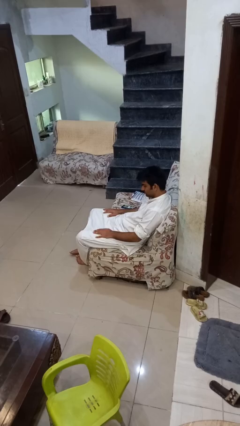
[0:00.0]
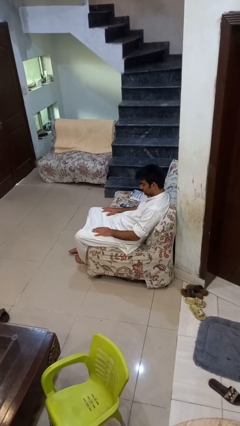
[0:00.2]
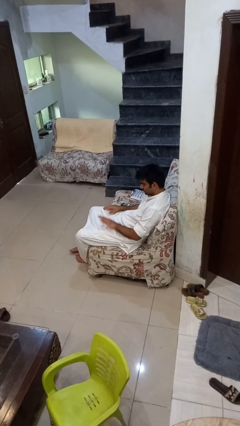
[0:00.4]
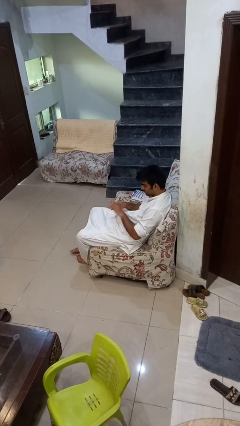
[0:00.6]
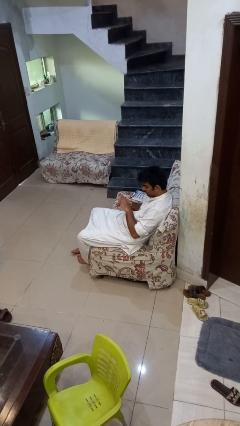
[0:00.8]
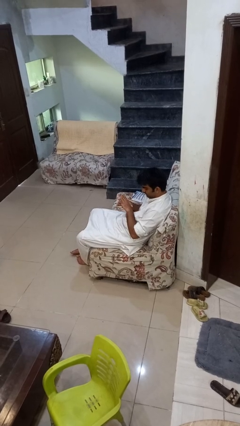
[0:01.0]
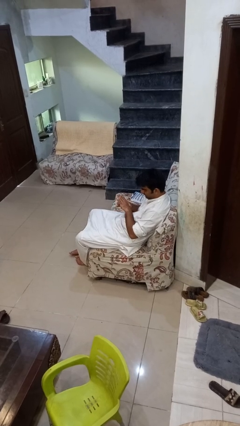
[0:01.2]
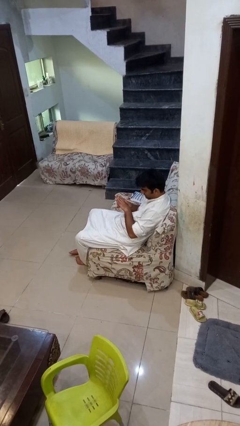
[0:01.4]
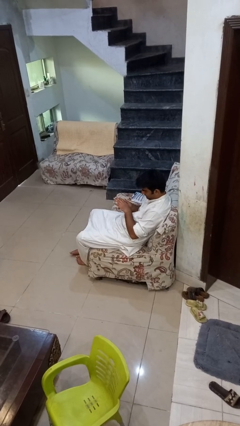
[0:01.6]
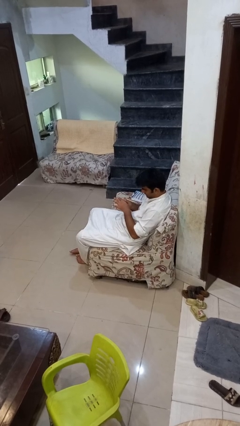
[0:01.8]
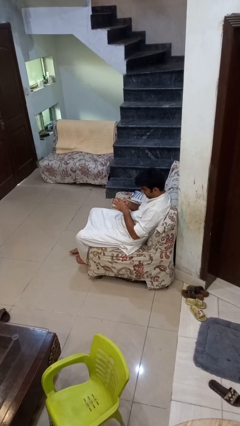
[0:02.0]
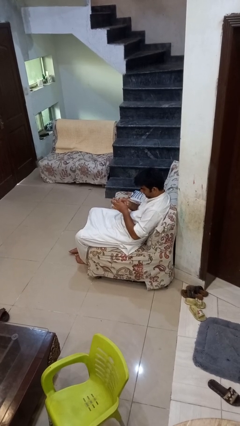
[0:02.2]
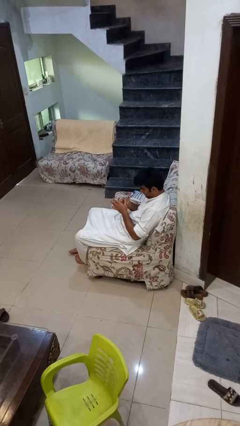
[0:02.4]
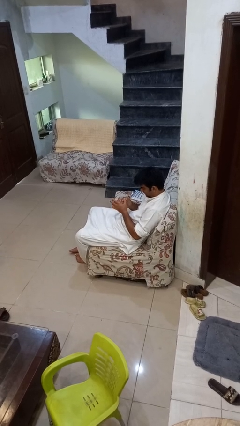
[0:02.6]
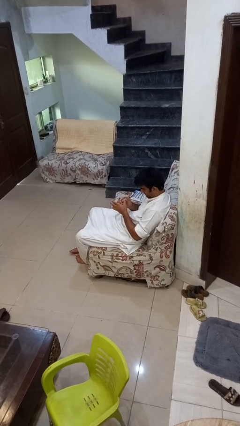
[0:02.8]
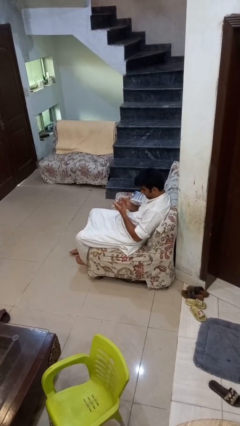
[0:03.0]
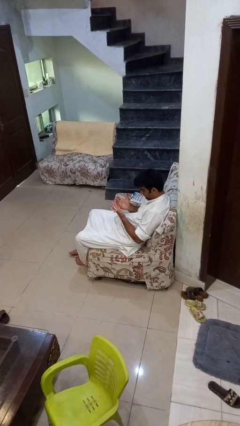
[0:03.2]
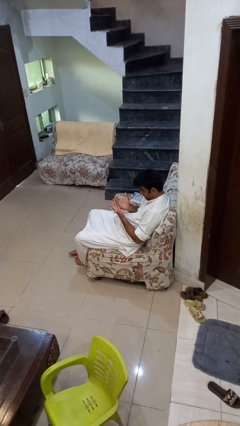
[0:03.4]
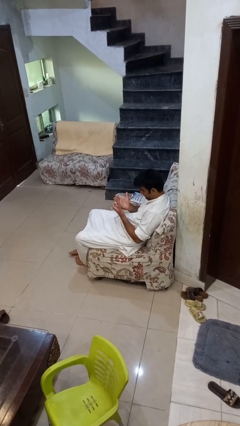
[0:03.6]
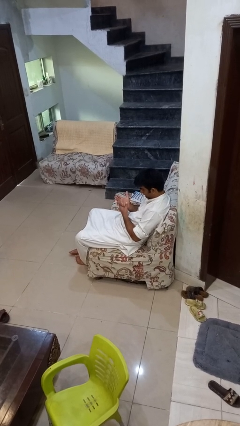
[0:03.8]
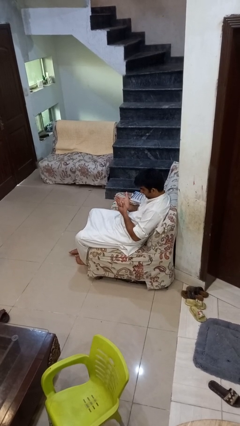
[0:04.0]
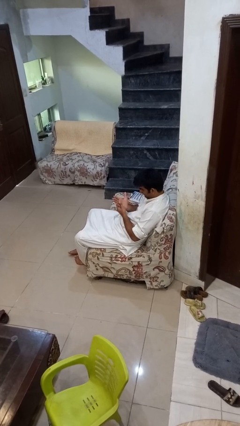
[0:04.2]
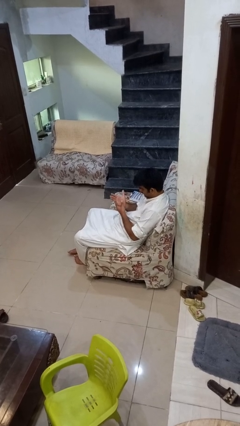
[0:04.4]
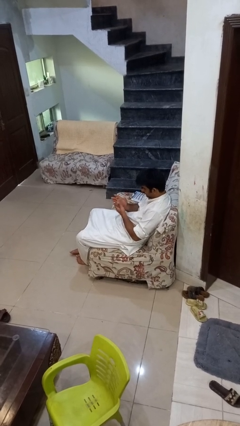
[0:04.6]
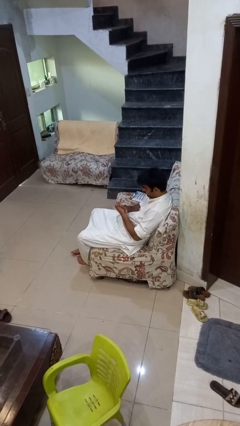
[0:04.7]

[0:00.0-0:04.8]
person looks at hands in lap

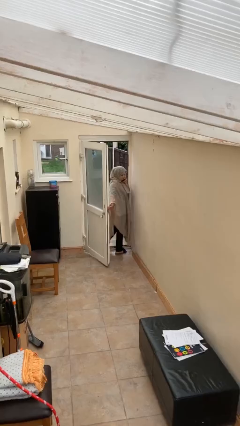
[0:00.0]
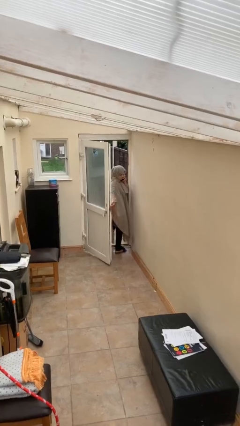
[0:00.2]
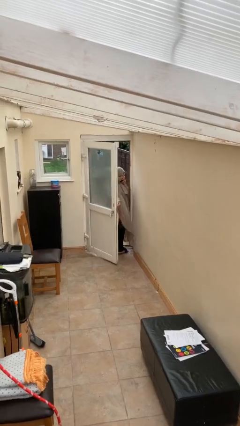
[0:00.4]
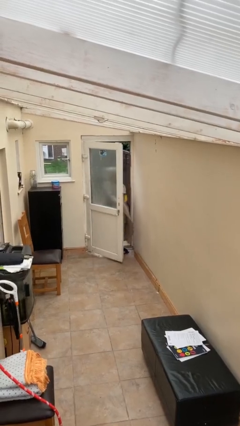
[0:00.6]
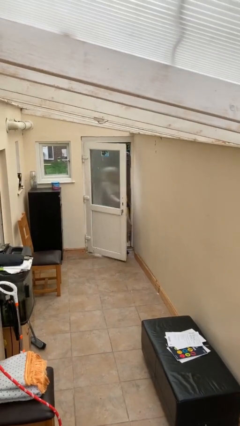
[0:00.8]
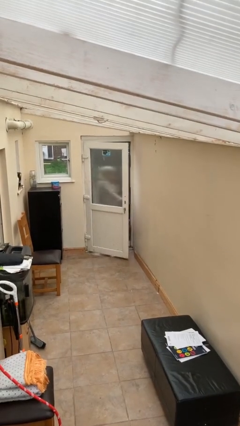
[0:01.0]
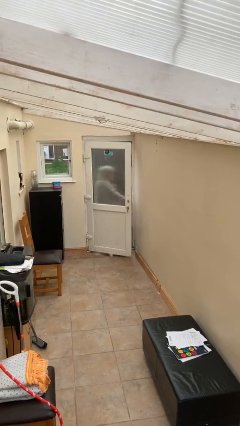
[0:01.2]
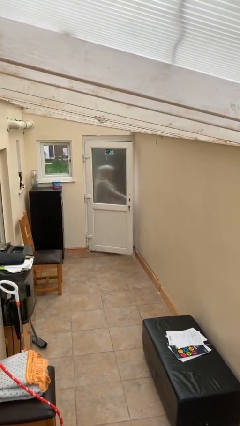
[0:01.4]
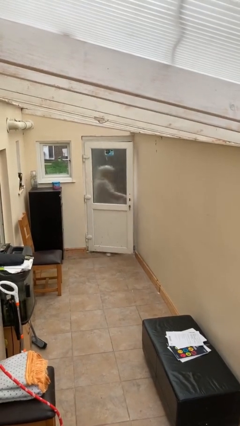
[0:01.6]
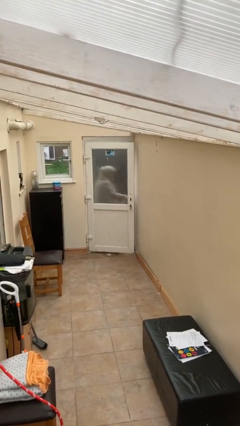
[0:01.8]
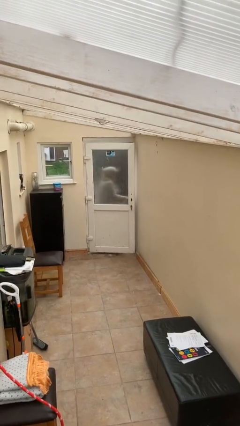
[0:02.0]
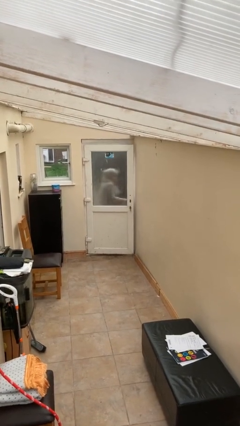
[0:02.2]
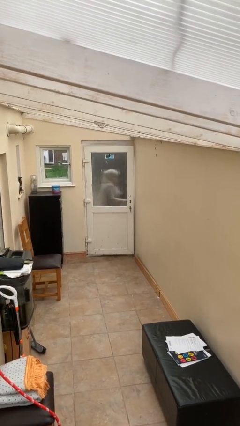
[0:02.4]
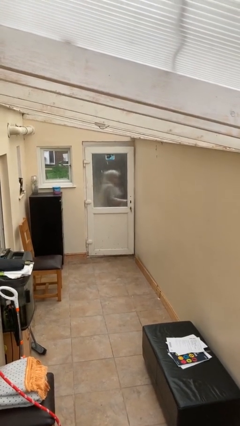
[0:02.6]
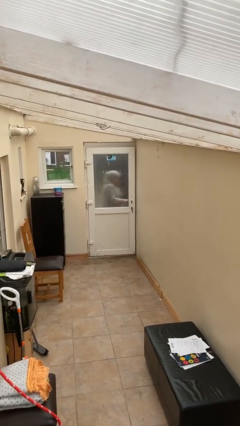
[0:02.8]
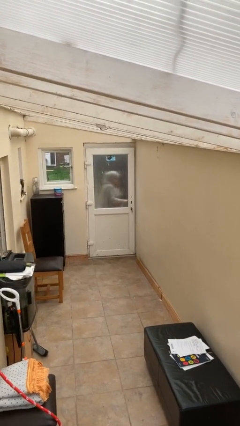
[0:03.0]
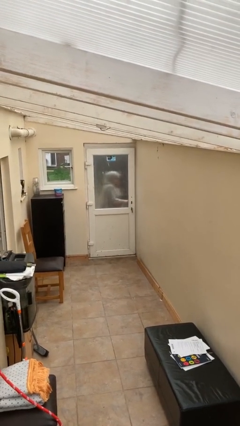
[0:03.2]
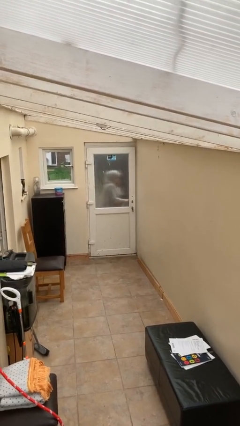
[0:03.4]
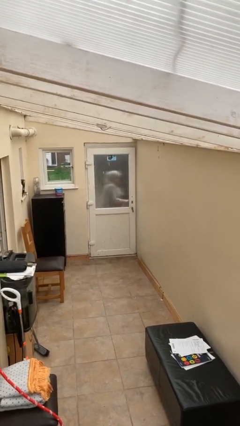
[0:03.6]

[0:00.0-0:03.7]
person closes facility door

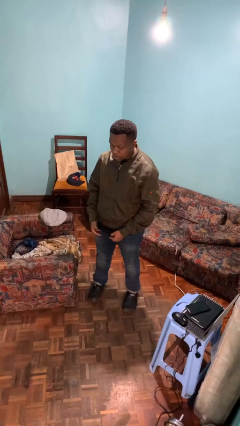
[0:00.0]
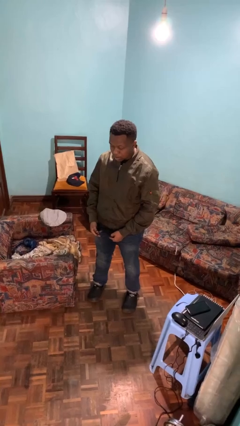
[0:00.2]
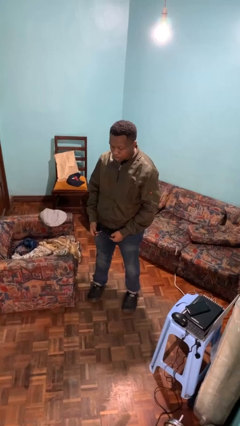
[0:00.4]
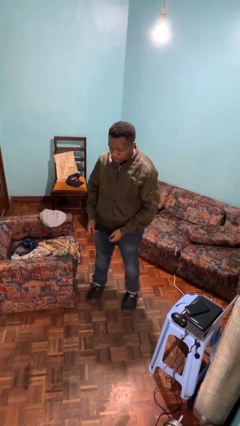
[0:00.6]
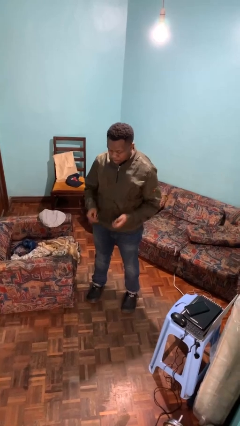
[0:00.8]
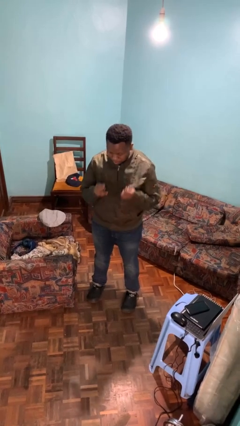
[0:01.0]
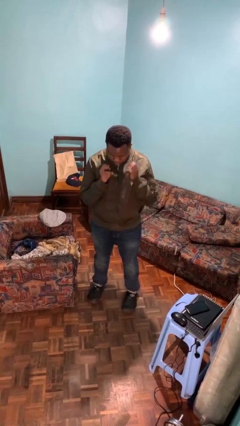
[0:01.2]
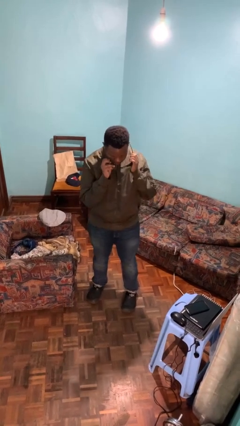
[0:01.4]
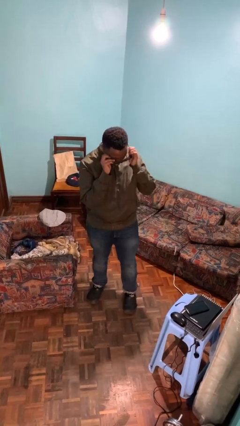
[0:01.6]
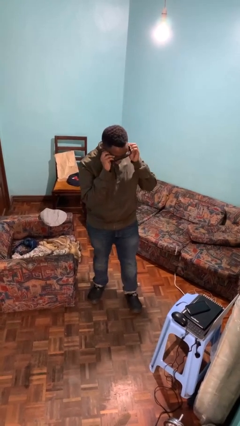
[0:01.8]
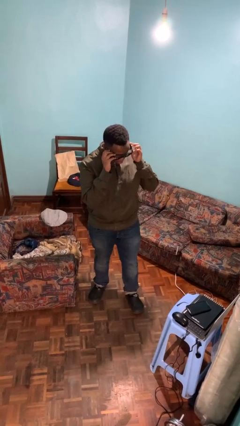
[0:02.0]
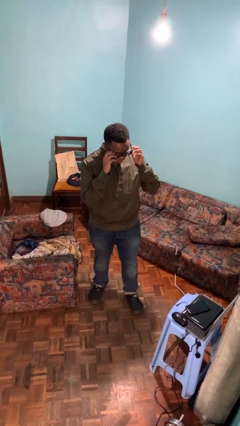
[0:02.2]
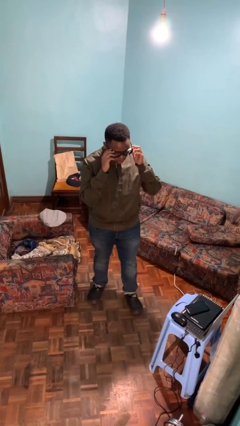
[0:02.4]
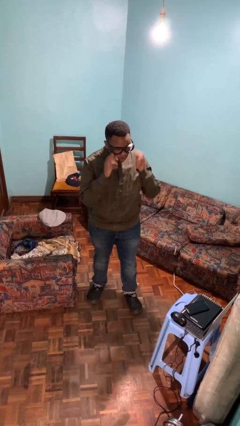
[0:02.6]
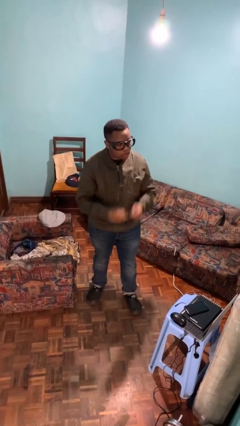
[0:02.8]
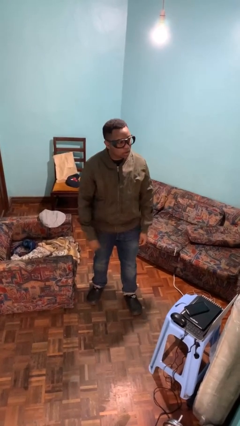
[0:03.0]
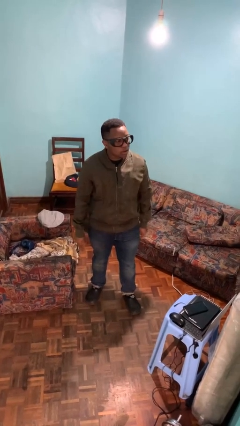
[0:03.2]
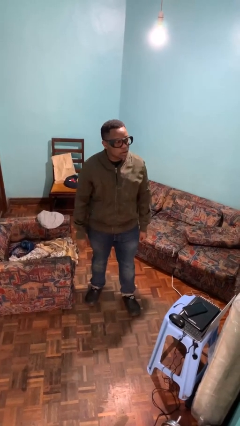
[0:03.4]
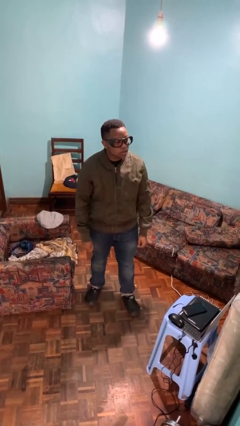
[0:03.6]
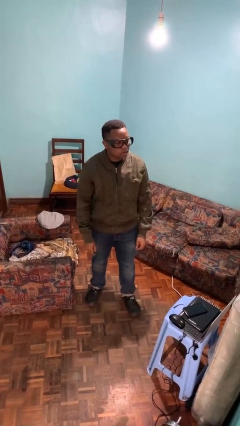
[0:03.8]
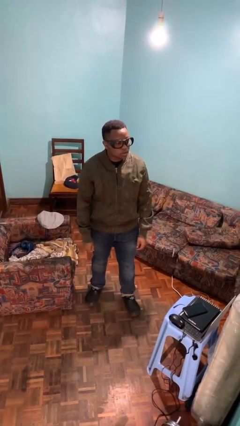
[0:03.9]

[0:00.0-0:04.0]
person puts on glasses

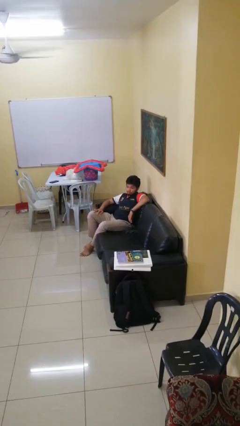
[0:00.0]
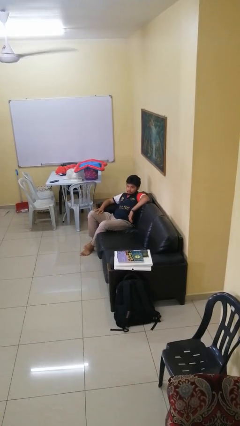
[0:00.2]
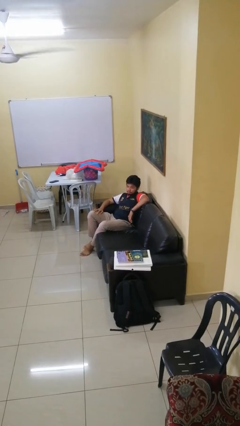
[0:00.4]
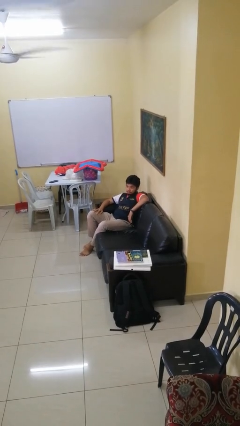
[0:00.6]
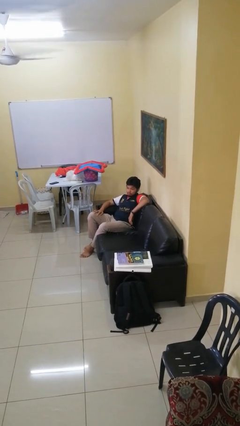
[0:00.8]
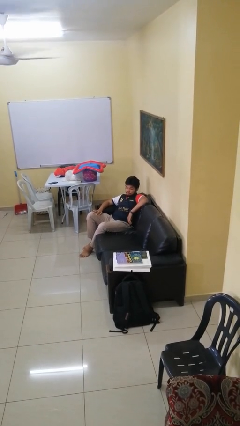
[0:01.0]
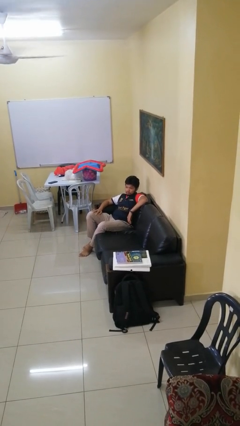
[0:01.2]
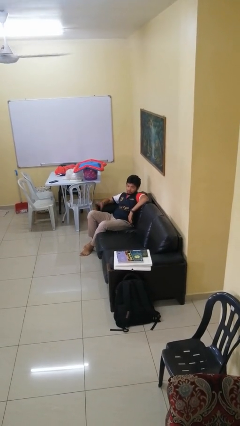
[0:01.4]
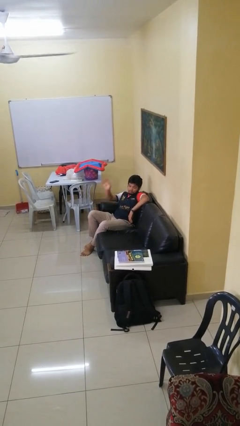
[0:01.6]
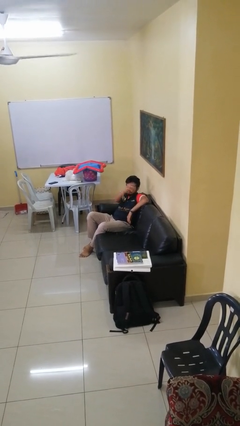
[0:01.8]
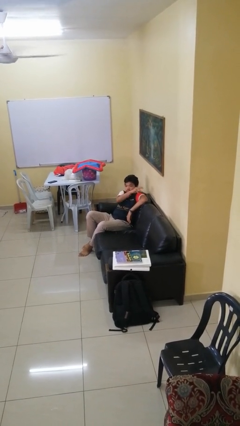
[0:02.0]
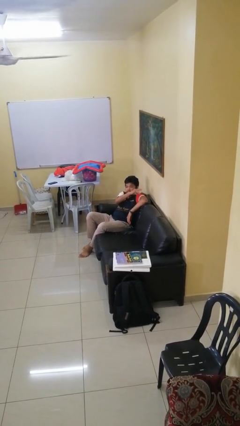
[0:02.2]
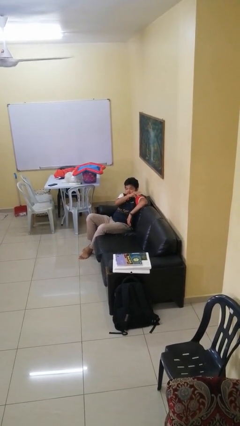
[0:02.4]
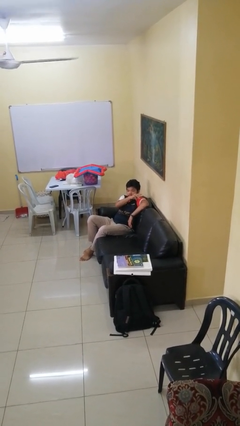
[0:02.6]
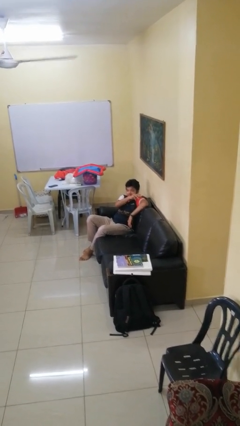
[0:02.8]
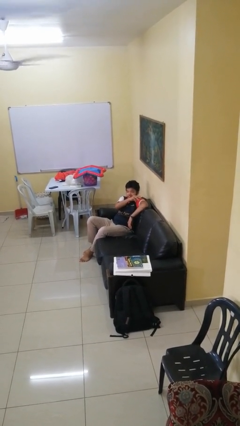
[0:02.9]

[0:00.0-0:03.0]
person gestures swipe left

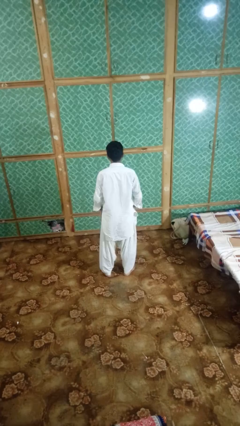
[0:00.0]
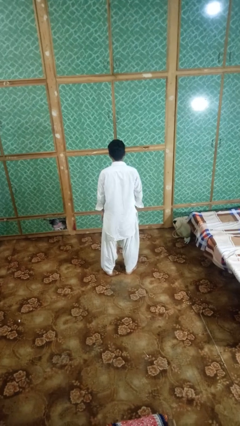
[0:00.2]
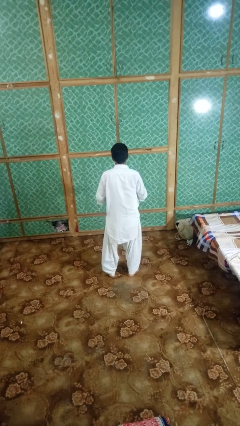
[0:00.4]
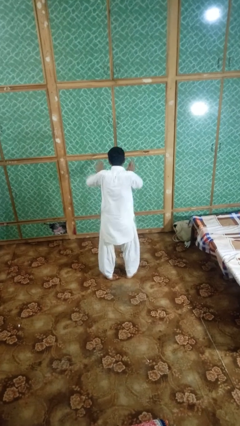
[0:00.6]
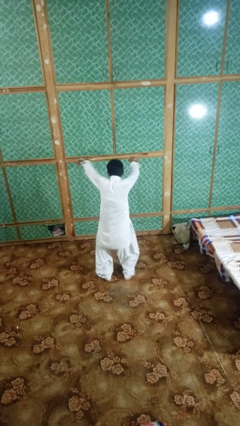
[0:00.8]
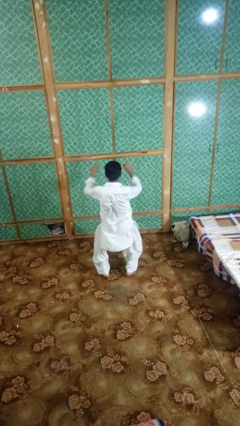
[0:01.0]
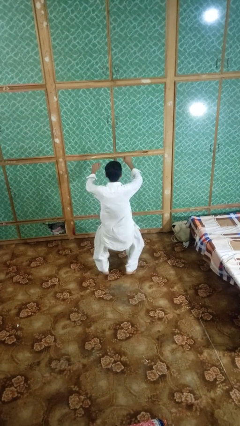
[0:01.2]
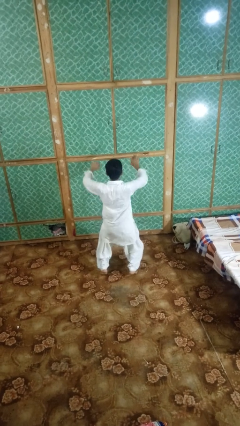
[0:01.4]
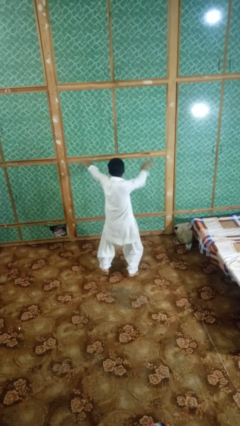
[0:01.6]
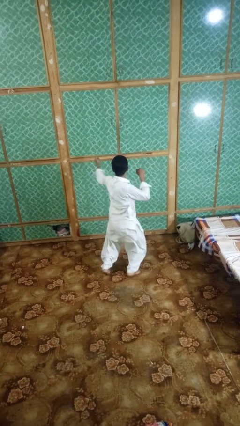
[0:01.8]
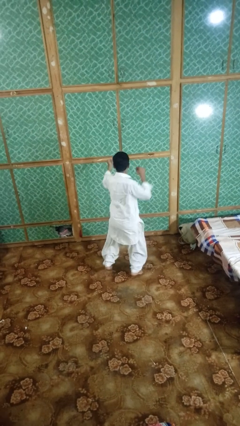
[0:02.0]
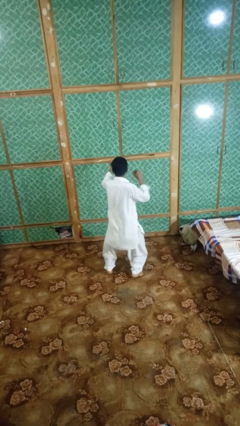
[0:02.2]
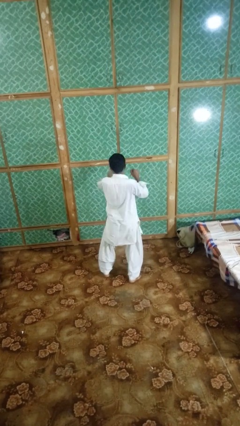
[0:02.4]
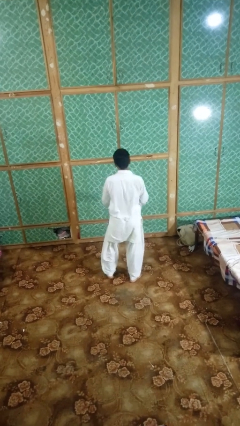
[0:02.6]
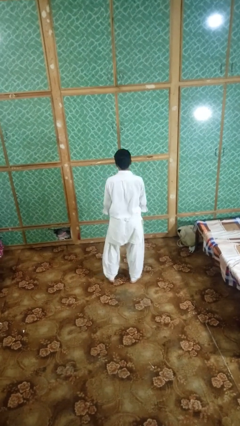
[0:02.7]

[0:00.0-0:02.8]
person dances in place
